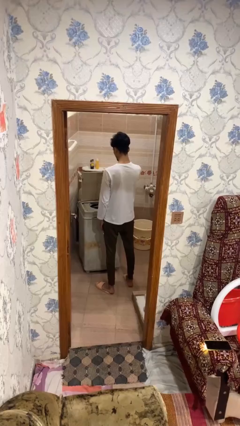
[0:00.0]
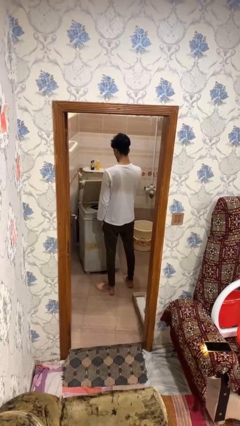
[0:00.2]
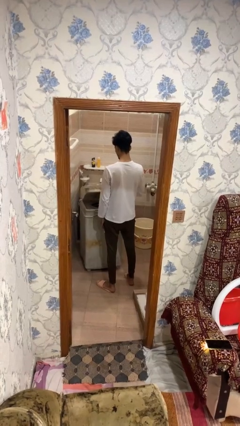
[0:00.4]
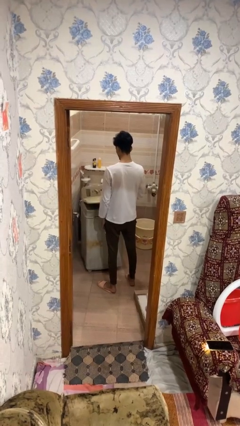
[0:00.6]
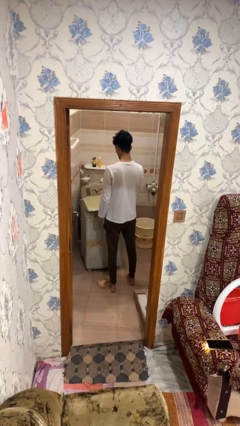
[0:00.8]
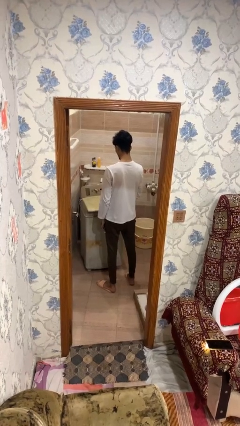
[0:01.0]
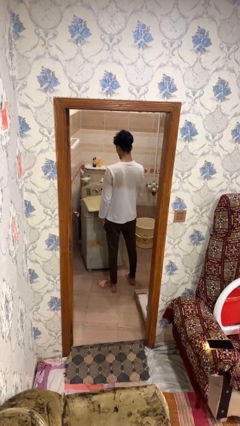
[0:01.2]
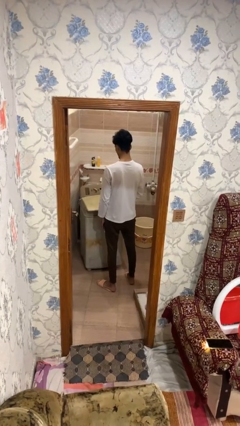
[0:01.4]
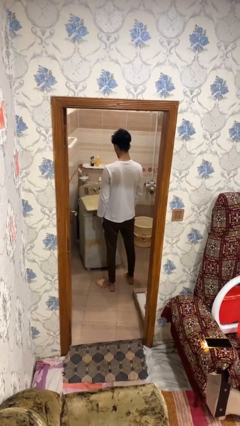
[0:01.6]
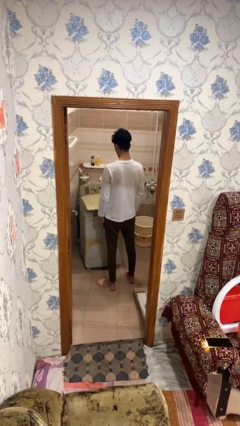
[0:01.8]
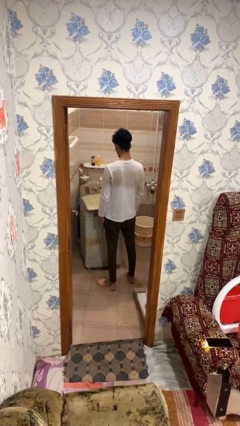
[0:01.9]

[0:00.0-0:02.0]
person closes clothes washer

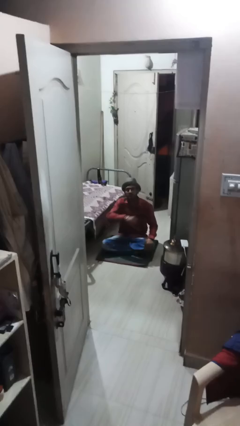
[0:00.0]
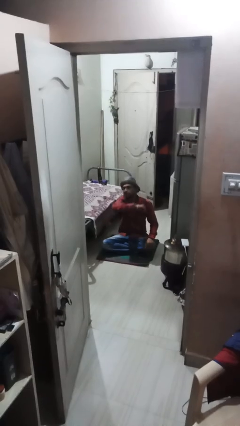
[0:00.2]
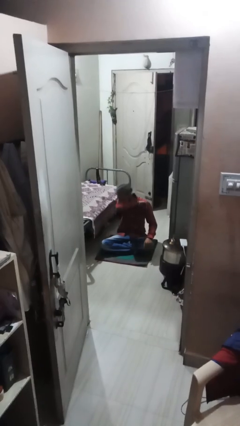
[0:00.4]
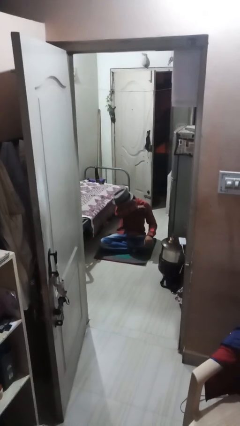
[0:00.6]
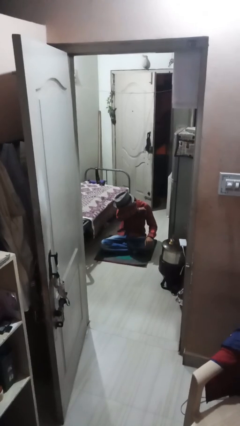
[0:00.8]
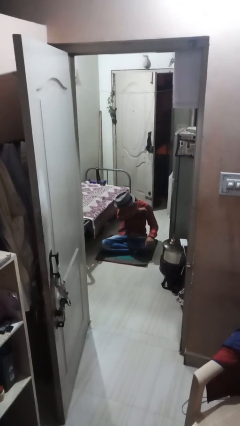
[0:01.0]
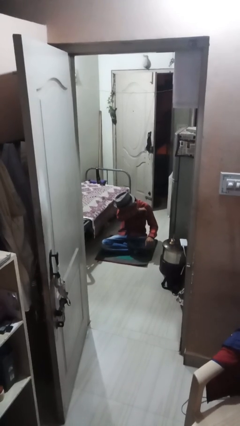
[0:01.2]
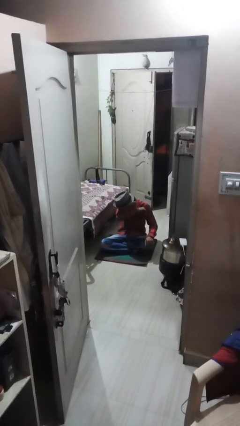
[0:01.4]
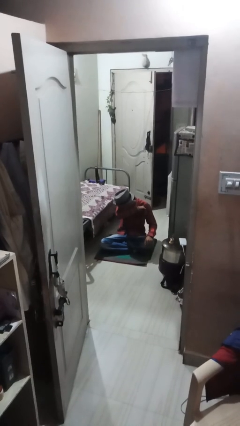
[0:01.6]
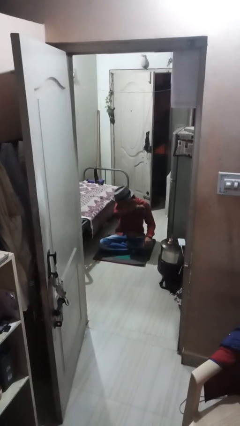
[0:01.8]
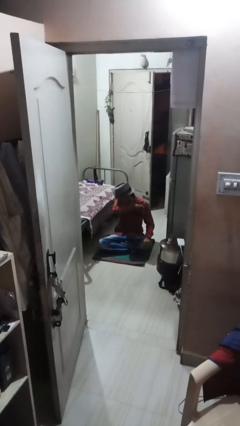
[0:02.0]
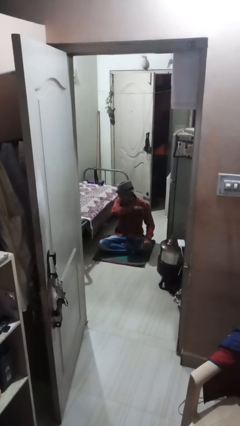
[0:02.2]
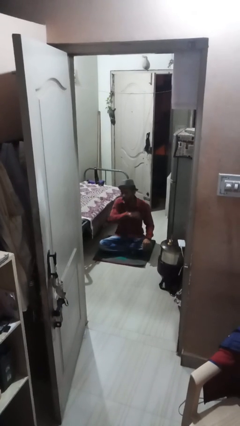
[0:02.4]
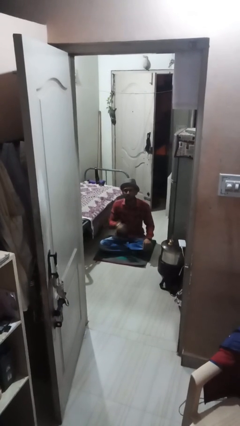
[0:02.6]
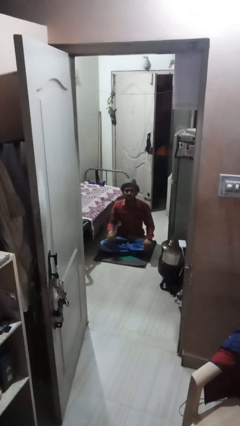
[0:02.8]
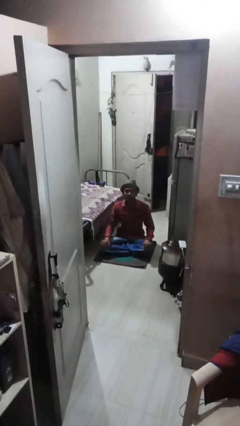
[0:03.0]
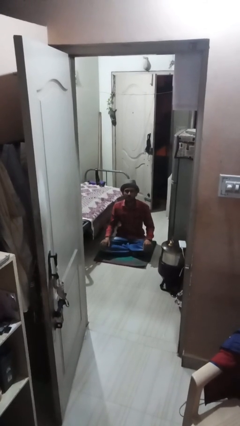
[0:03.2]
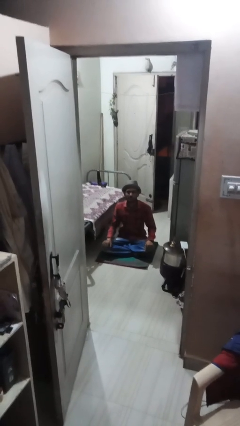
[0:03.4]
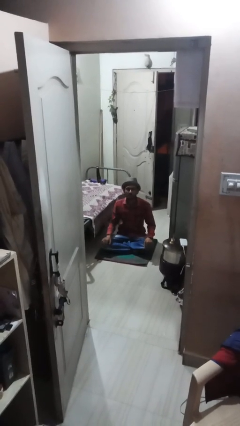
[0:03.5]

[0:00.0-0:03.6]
person sneezes into arm

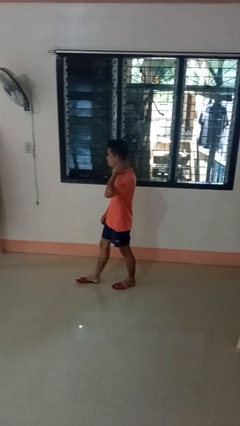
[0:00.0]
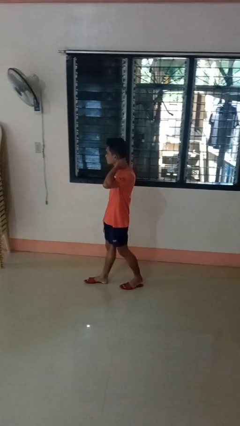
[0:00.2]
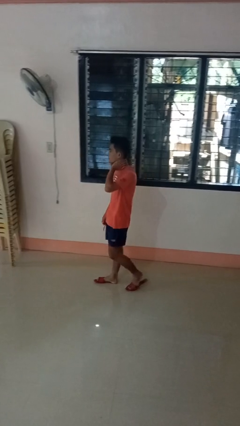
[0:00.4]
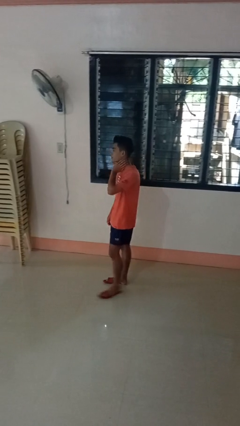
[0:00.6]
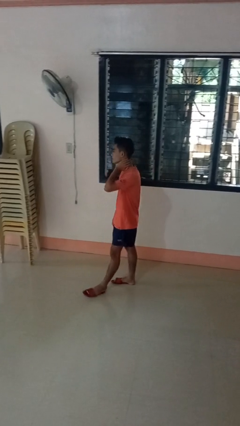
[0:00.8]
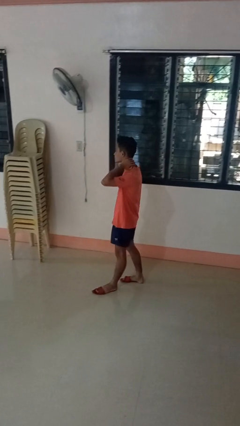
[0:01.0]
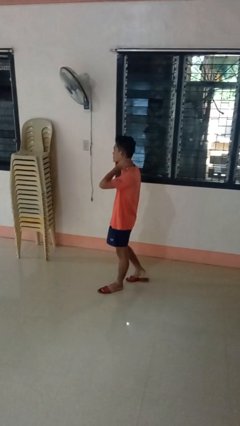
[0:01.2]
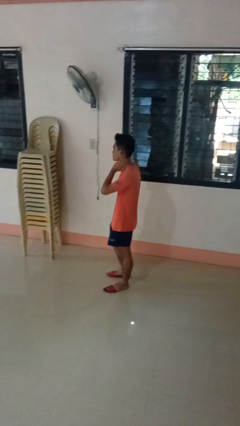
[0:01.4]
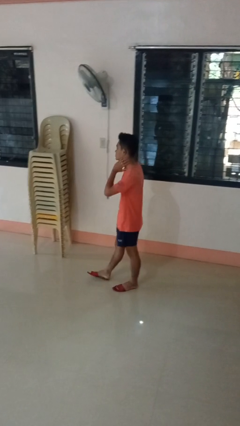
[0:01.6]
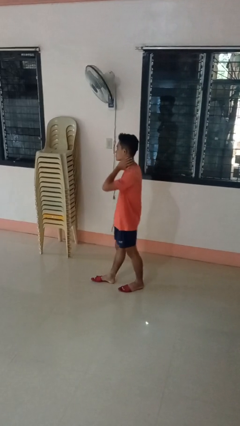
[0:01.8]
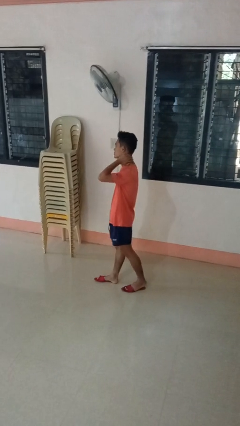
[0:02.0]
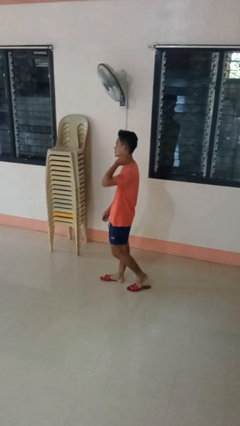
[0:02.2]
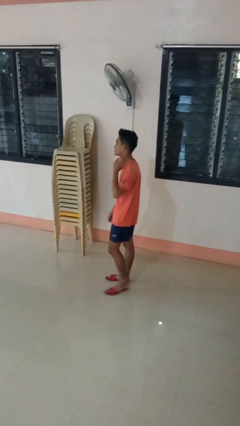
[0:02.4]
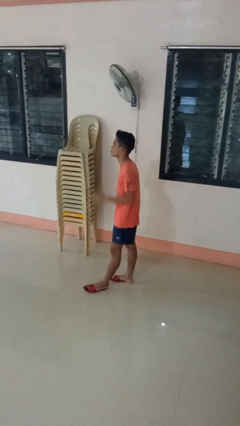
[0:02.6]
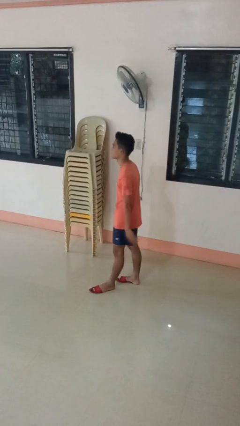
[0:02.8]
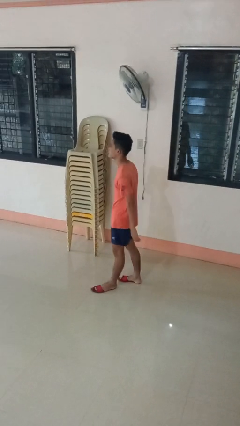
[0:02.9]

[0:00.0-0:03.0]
person rubs neck

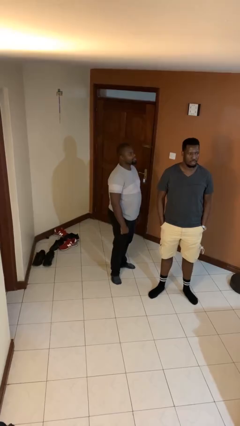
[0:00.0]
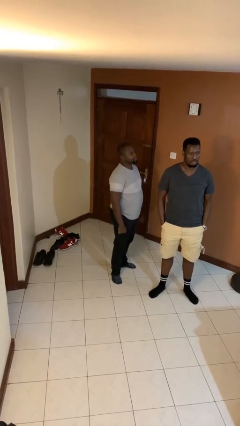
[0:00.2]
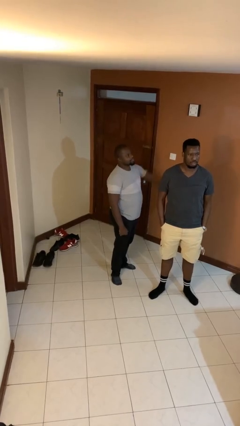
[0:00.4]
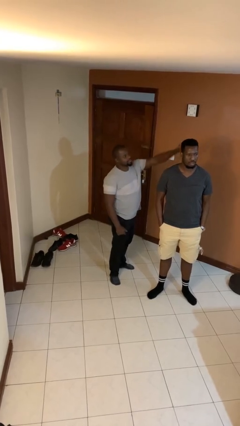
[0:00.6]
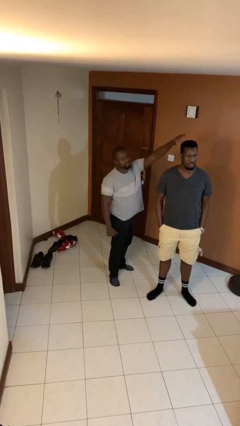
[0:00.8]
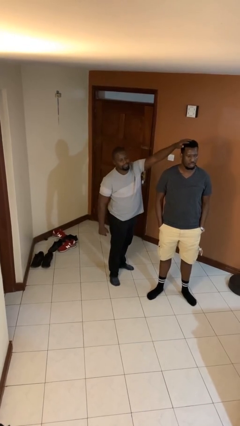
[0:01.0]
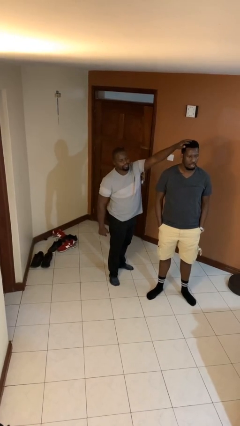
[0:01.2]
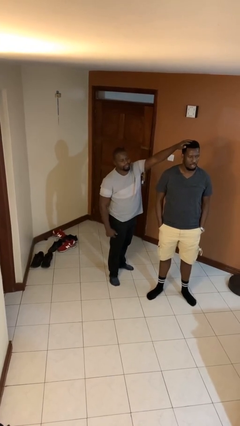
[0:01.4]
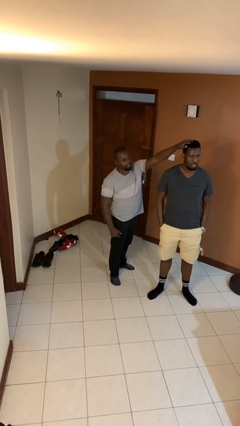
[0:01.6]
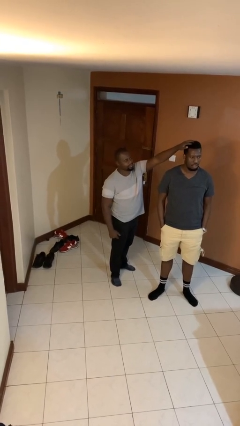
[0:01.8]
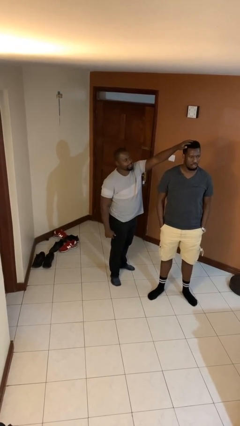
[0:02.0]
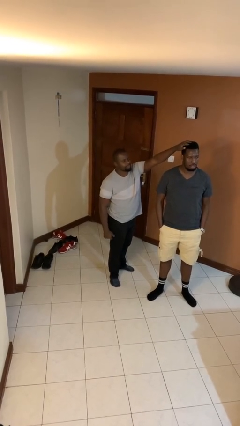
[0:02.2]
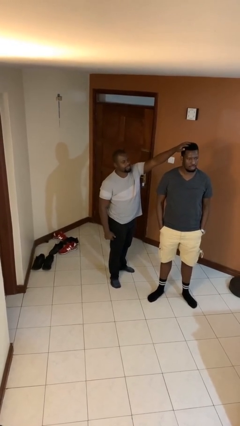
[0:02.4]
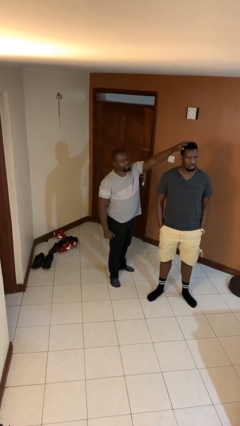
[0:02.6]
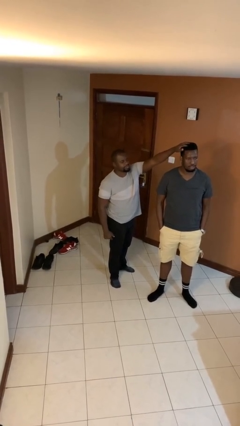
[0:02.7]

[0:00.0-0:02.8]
person grabs person by hair

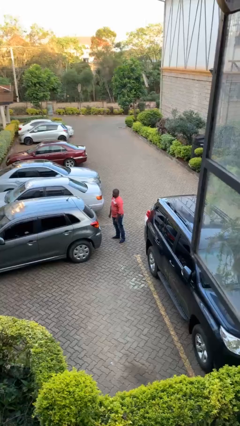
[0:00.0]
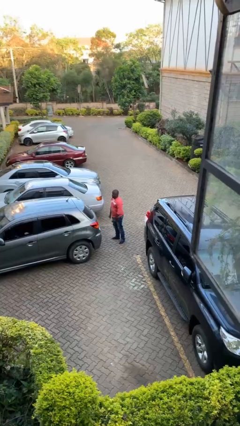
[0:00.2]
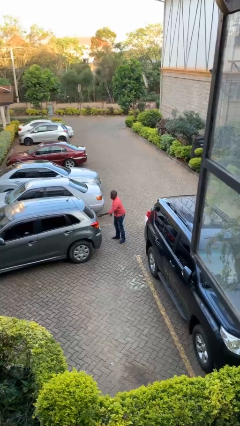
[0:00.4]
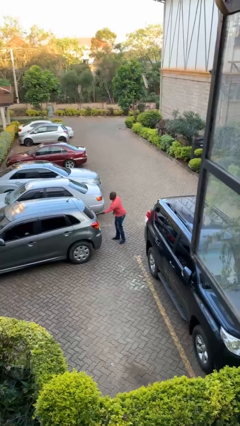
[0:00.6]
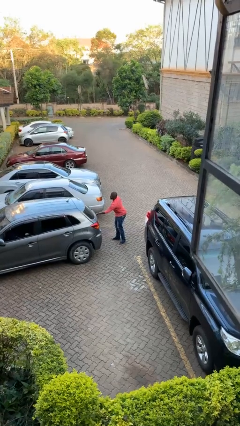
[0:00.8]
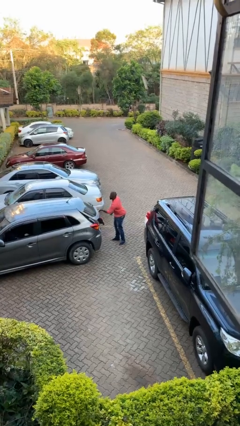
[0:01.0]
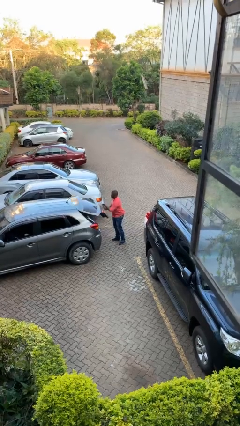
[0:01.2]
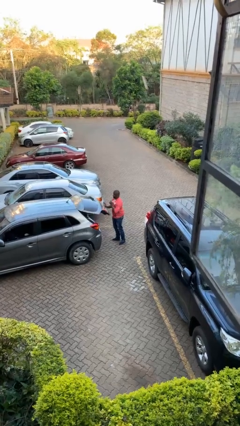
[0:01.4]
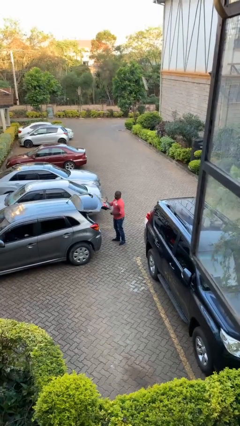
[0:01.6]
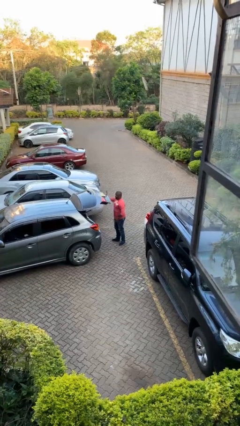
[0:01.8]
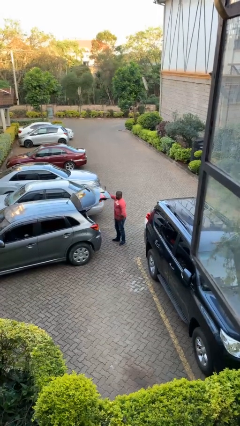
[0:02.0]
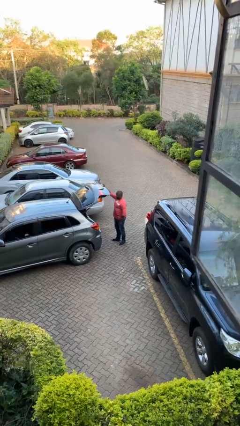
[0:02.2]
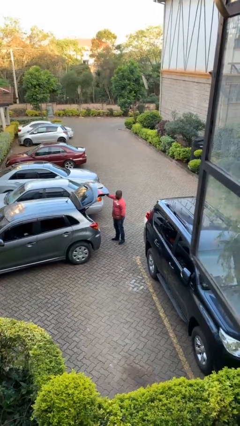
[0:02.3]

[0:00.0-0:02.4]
person opens car trunk

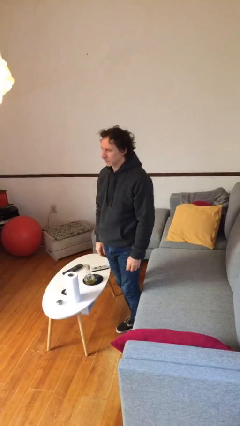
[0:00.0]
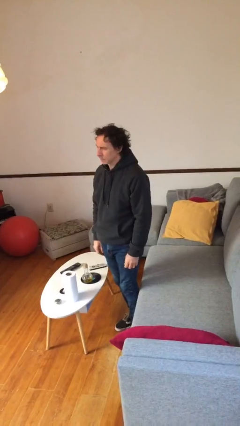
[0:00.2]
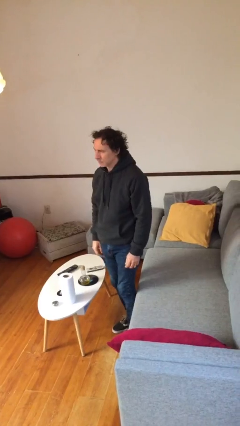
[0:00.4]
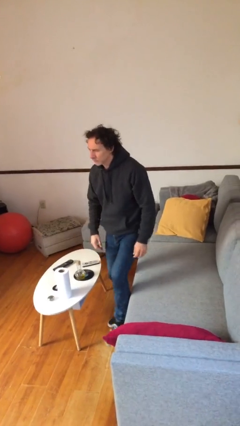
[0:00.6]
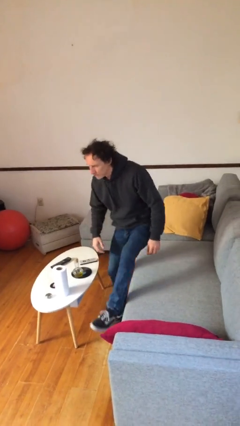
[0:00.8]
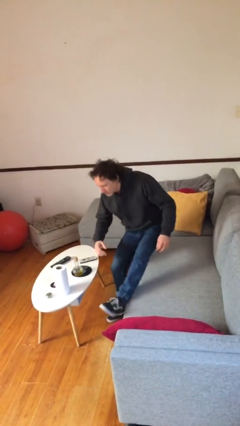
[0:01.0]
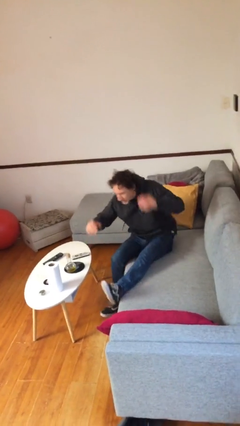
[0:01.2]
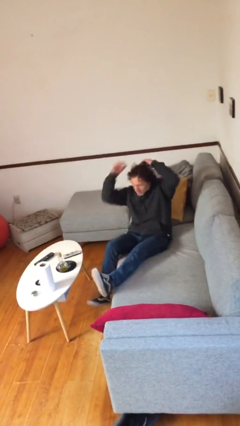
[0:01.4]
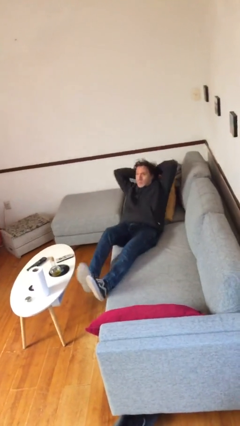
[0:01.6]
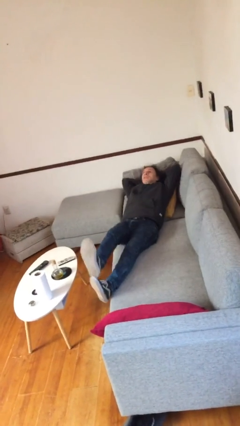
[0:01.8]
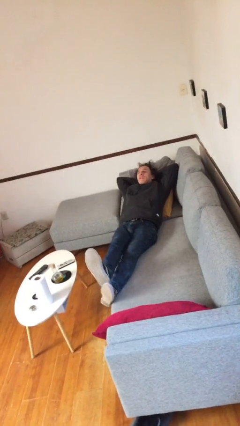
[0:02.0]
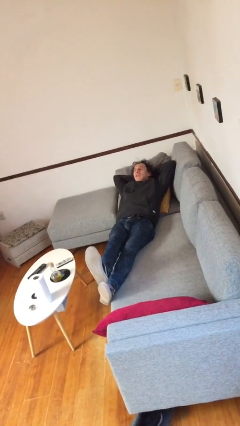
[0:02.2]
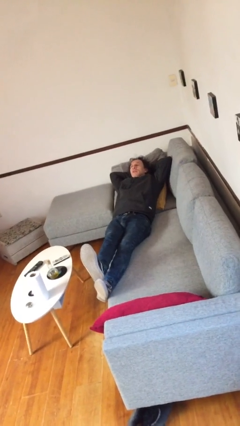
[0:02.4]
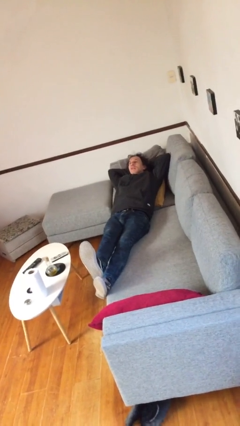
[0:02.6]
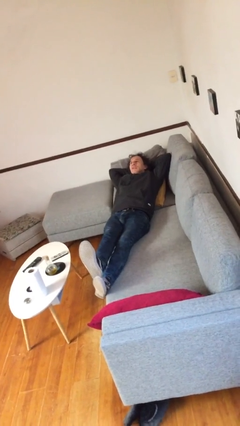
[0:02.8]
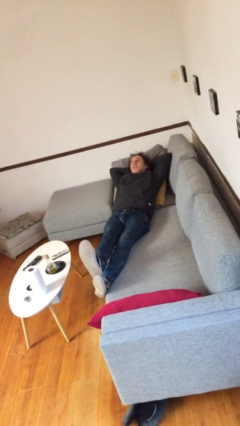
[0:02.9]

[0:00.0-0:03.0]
person lies down on couch

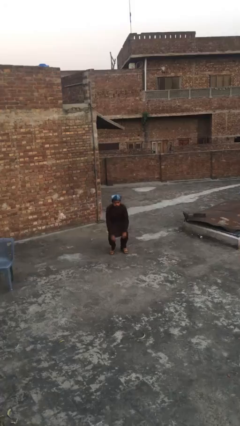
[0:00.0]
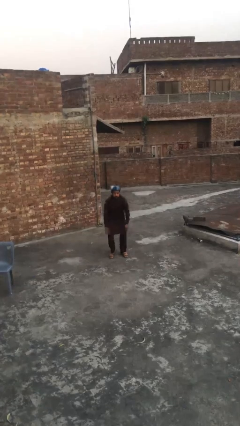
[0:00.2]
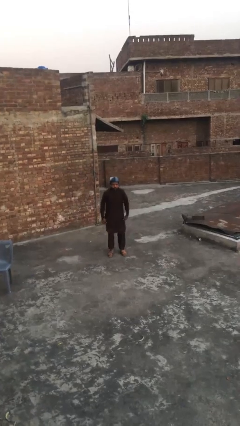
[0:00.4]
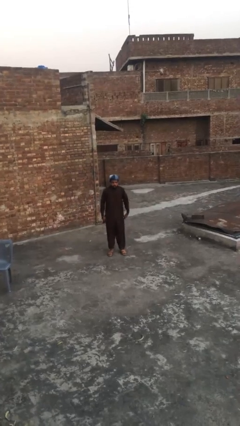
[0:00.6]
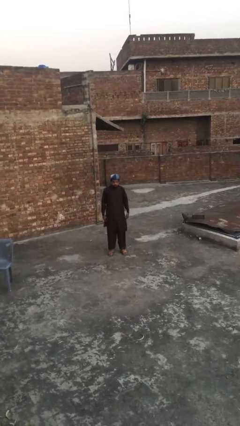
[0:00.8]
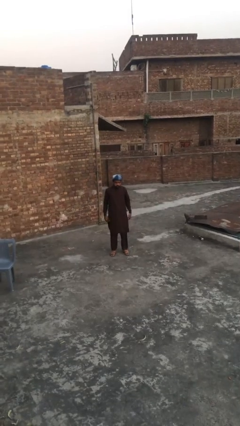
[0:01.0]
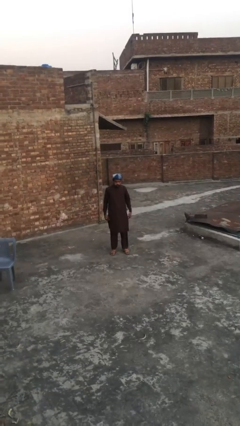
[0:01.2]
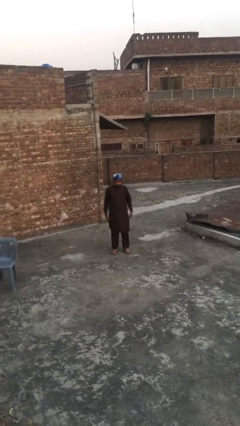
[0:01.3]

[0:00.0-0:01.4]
person stands up
